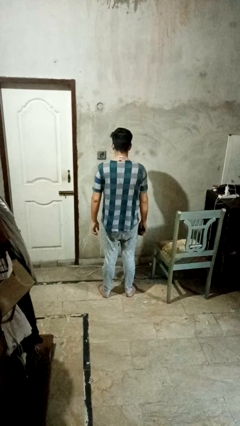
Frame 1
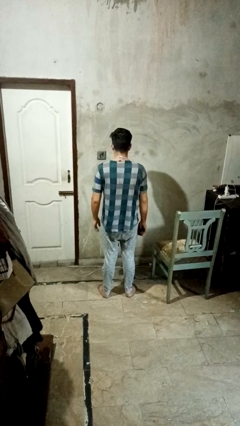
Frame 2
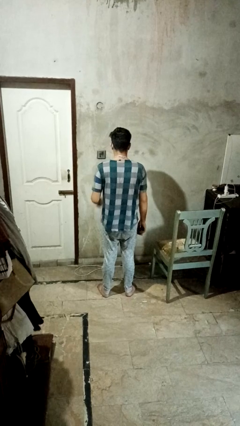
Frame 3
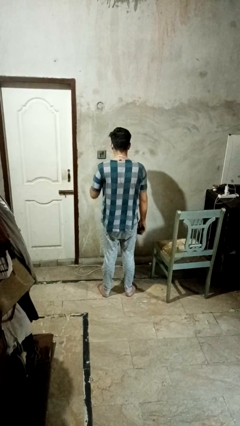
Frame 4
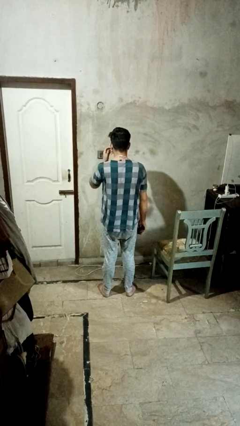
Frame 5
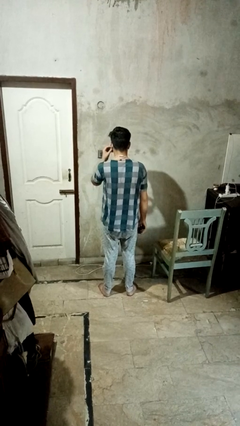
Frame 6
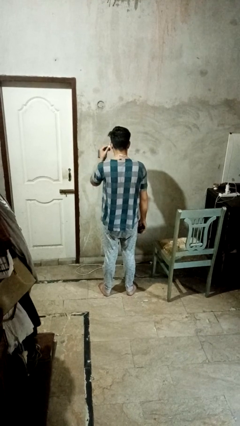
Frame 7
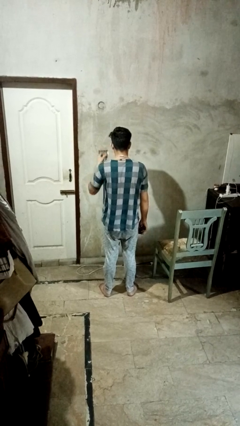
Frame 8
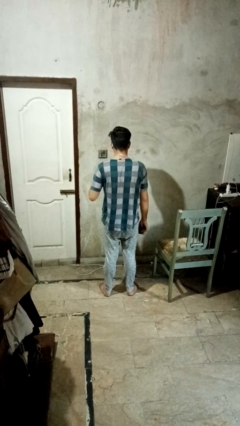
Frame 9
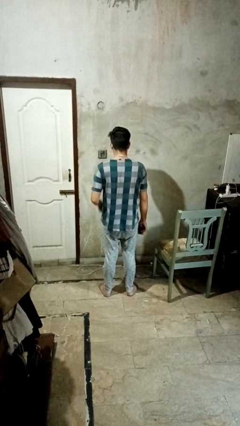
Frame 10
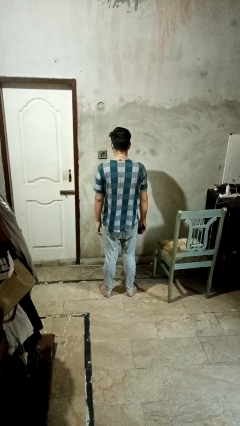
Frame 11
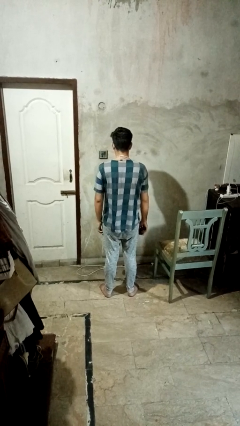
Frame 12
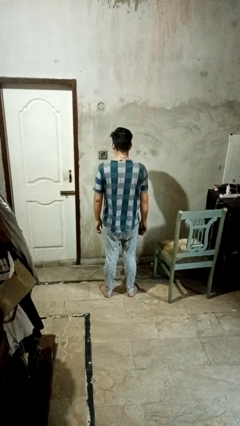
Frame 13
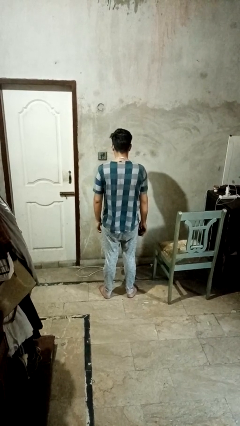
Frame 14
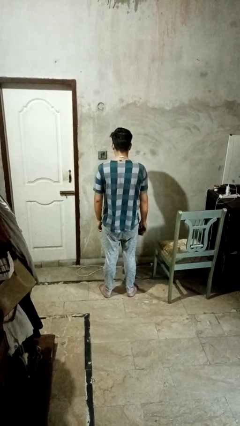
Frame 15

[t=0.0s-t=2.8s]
person takes off headphones

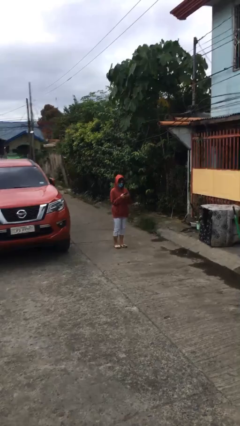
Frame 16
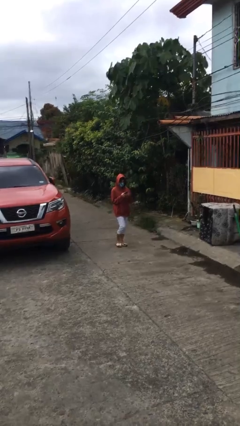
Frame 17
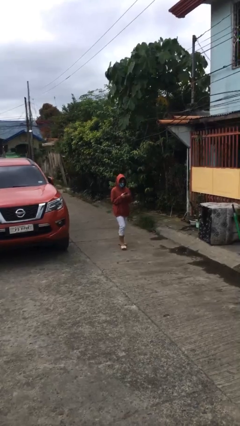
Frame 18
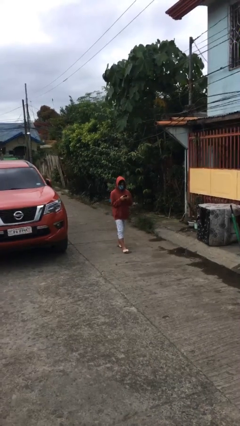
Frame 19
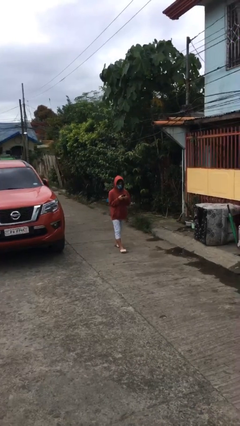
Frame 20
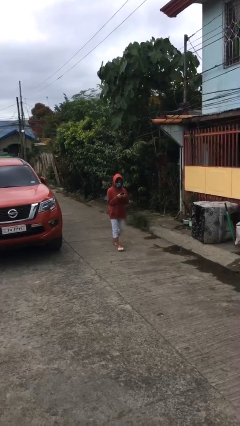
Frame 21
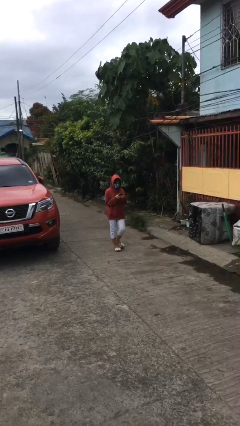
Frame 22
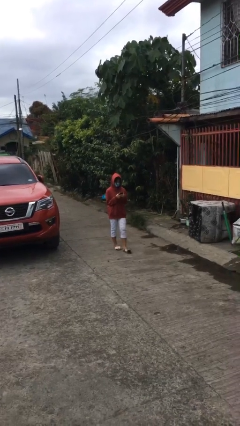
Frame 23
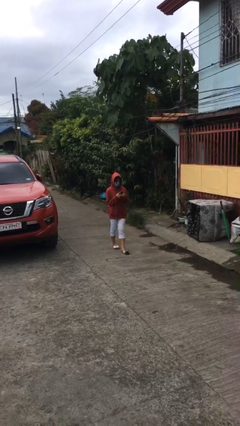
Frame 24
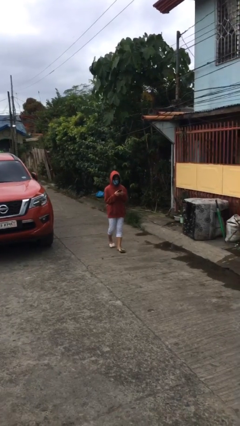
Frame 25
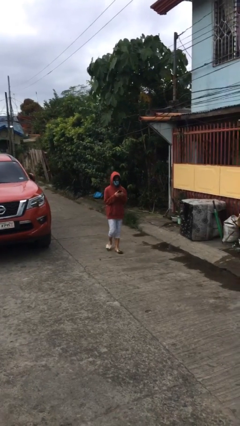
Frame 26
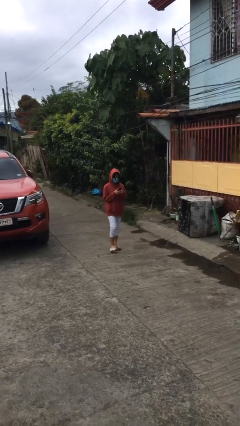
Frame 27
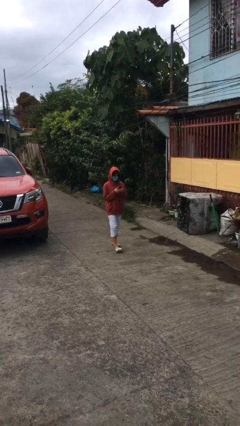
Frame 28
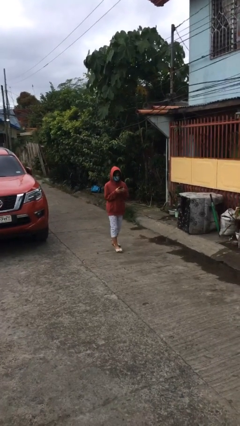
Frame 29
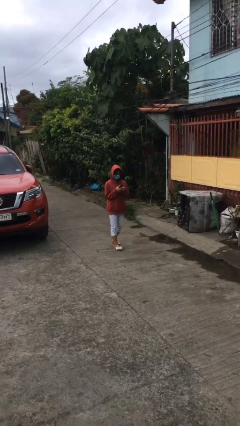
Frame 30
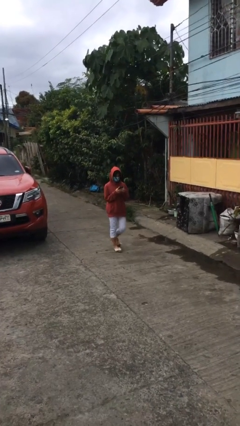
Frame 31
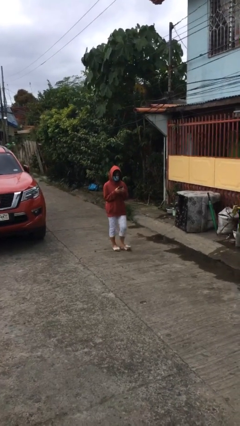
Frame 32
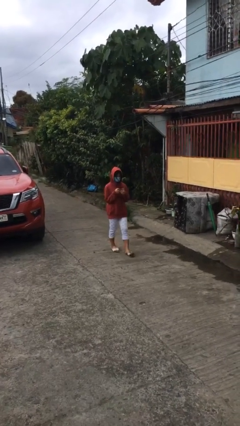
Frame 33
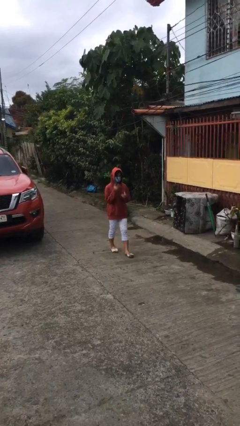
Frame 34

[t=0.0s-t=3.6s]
person texts on phone

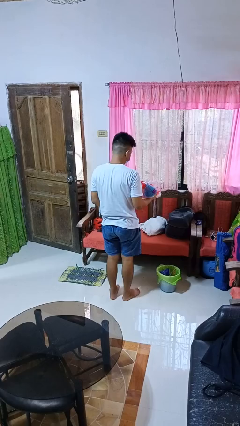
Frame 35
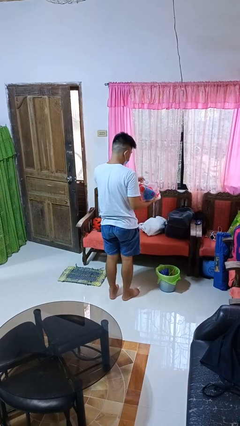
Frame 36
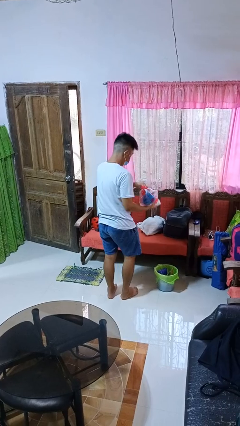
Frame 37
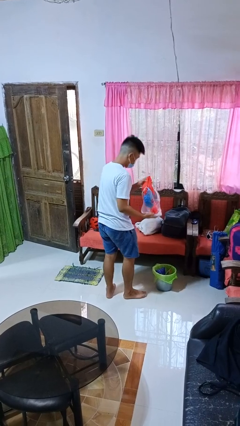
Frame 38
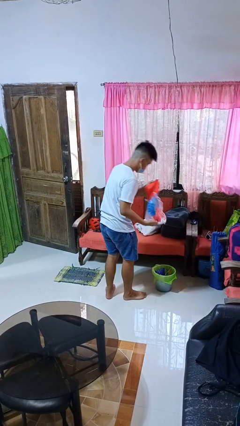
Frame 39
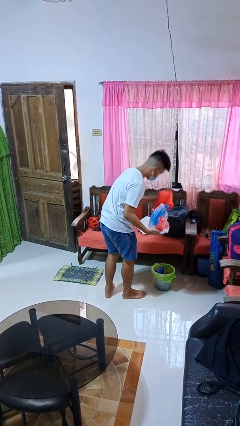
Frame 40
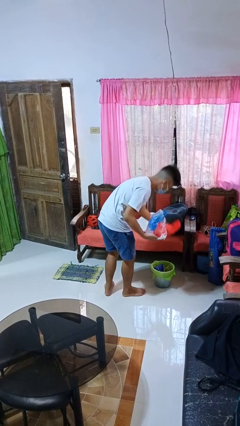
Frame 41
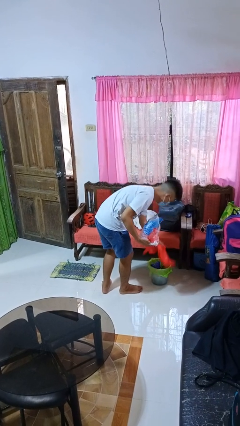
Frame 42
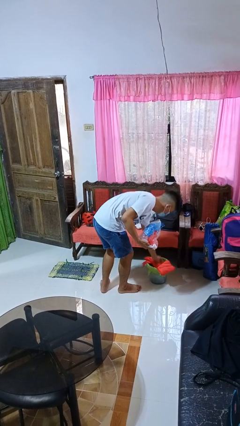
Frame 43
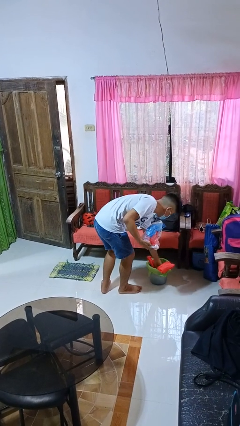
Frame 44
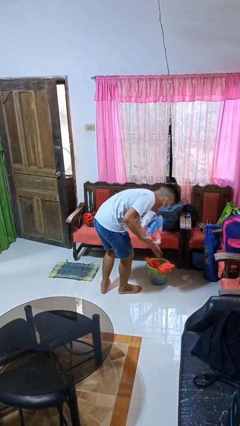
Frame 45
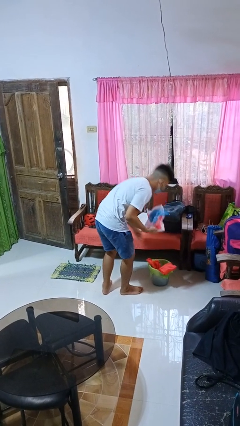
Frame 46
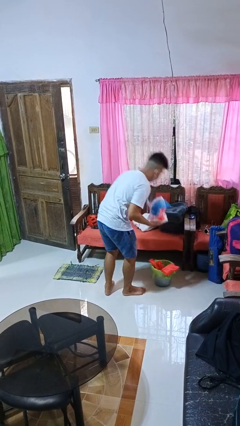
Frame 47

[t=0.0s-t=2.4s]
person discards trash

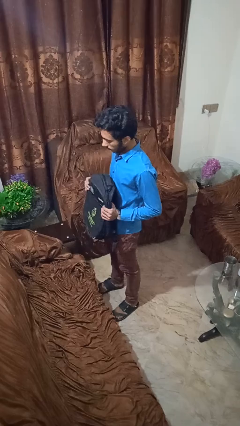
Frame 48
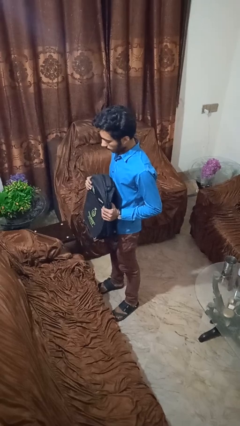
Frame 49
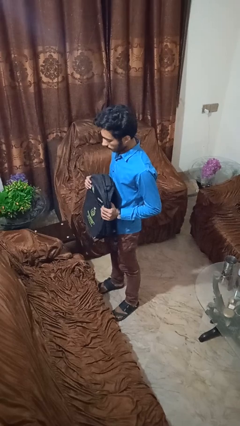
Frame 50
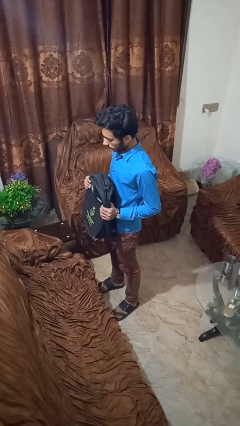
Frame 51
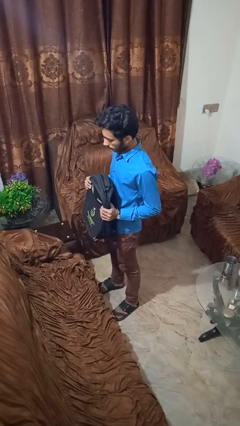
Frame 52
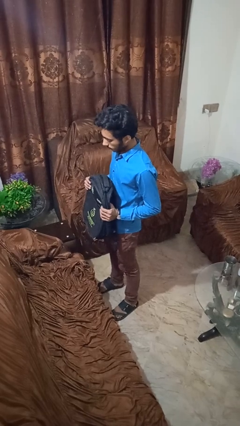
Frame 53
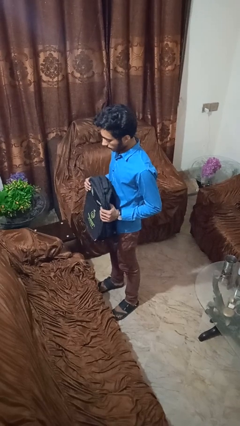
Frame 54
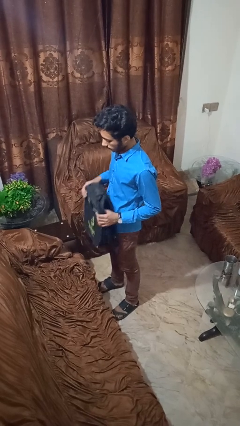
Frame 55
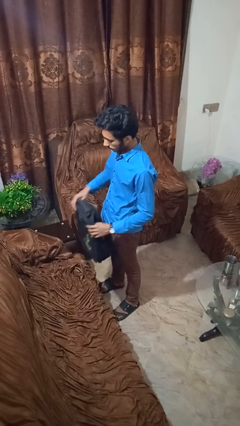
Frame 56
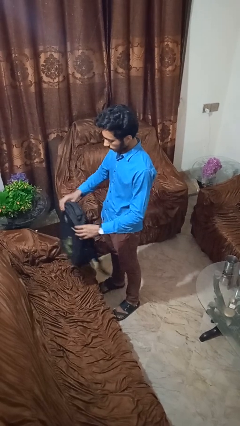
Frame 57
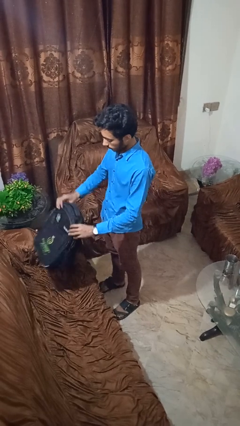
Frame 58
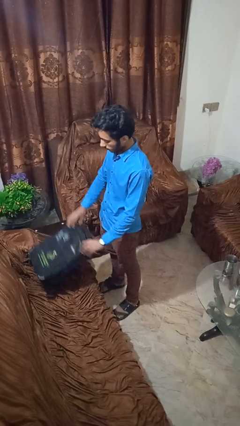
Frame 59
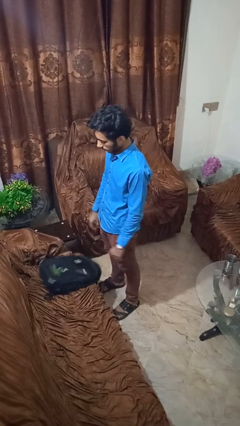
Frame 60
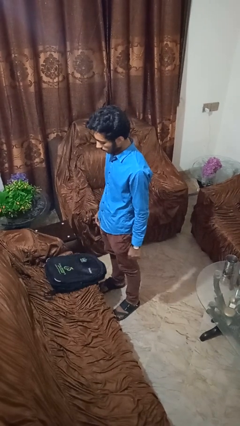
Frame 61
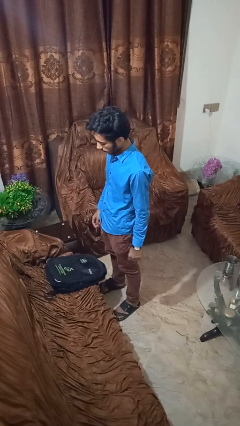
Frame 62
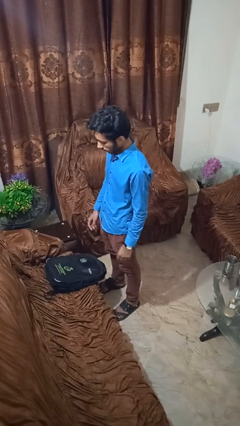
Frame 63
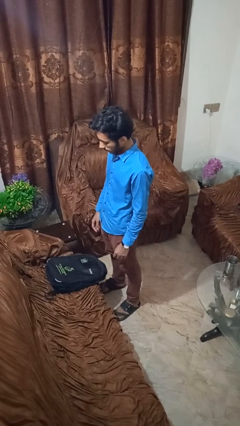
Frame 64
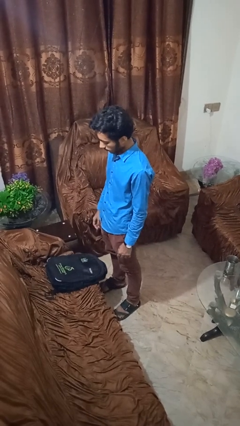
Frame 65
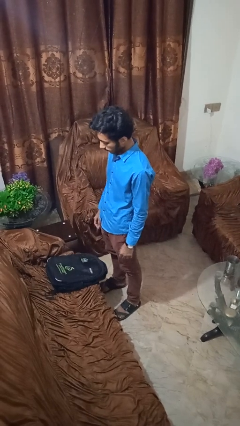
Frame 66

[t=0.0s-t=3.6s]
person puts down object on couch

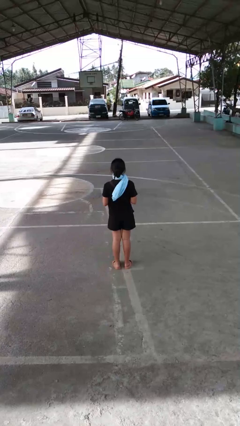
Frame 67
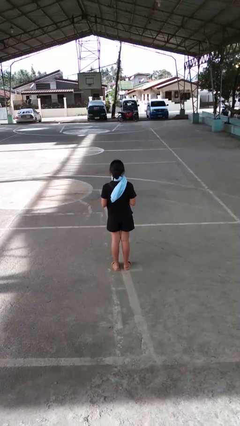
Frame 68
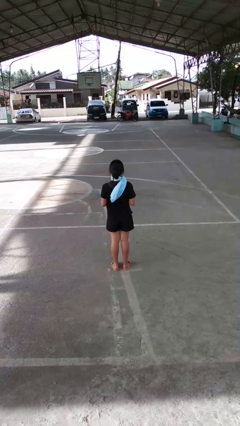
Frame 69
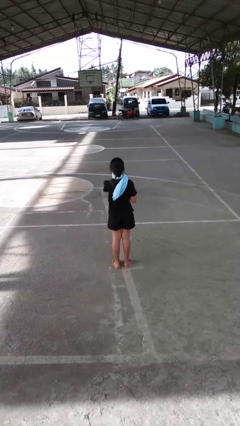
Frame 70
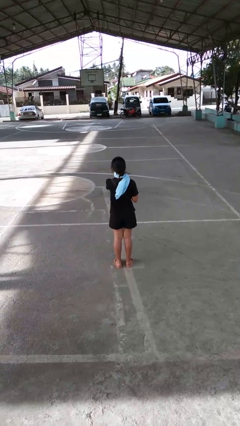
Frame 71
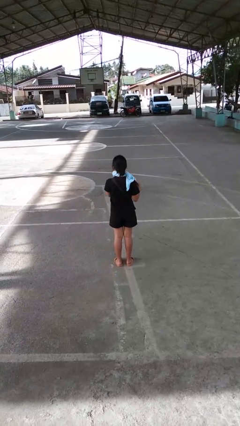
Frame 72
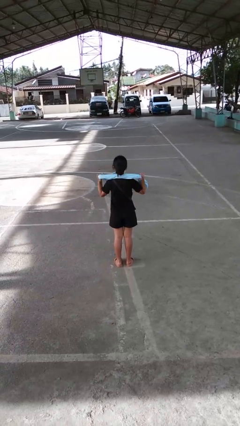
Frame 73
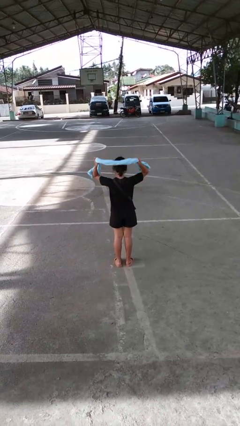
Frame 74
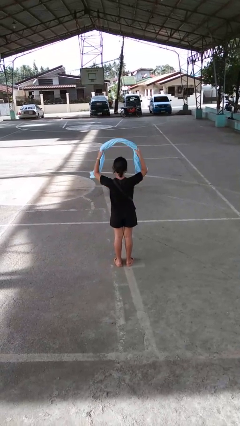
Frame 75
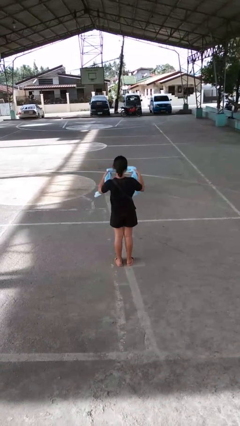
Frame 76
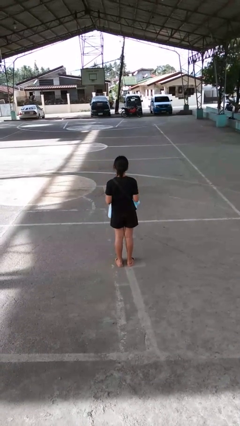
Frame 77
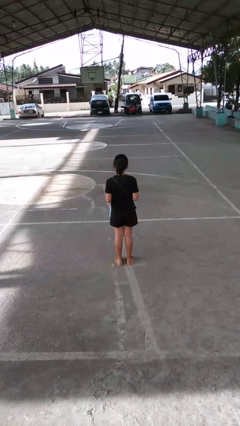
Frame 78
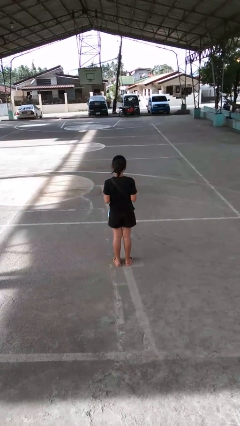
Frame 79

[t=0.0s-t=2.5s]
person takes off scarf

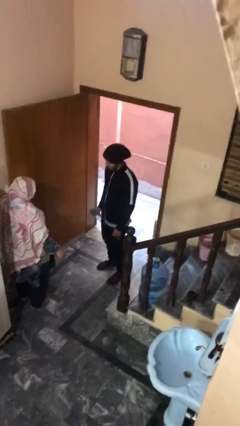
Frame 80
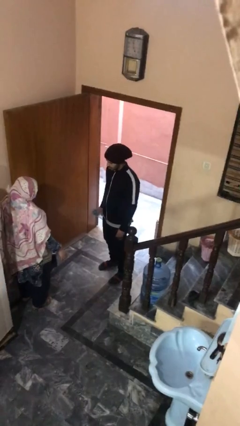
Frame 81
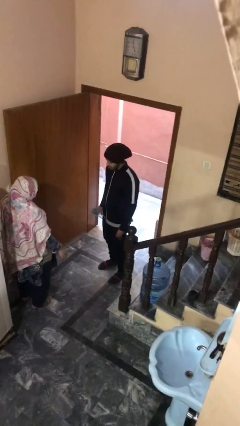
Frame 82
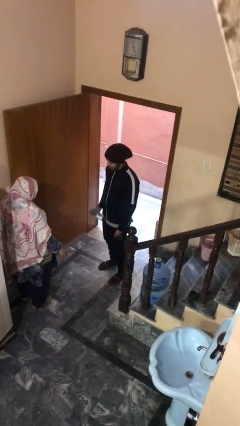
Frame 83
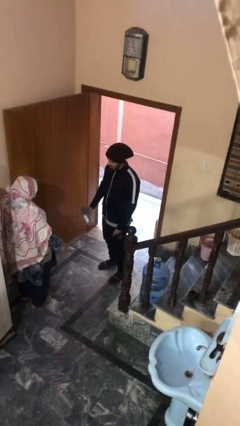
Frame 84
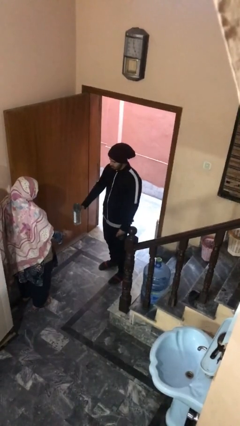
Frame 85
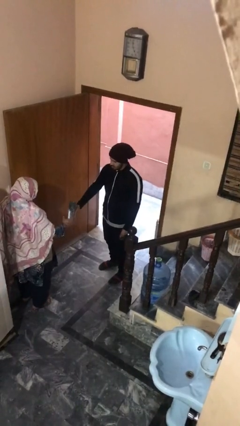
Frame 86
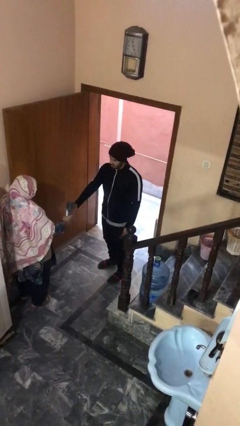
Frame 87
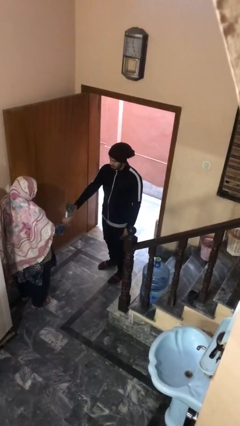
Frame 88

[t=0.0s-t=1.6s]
person transfers object to person

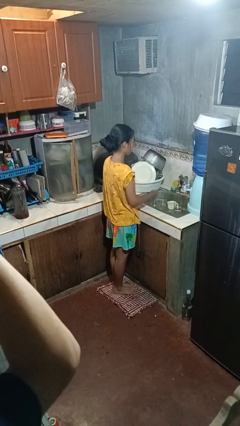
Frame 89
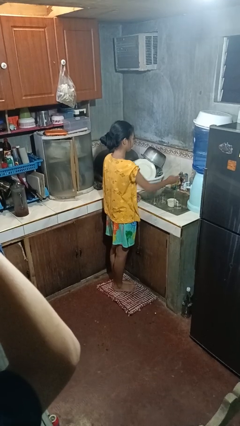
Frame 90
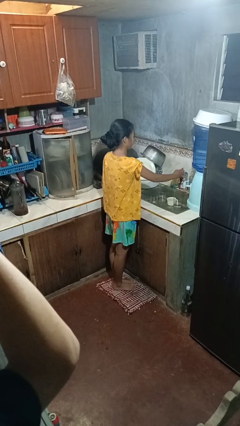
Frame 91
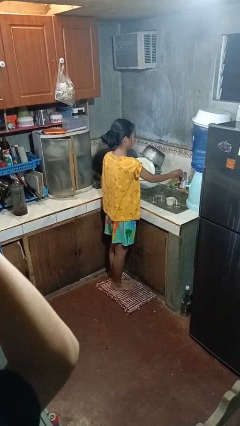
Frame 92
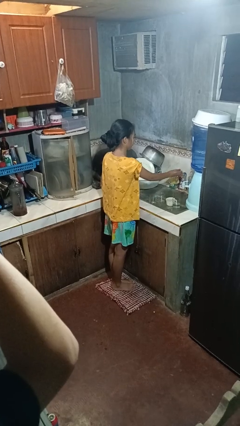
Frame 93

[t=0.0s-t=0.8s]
person turns off faucet

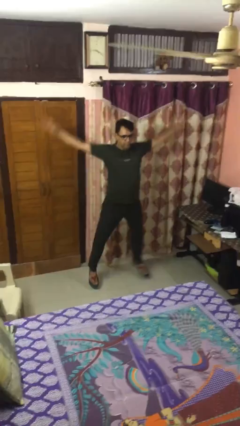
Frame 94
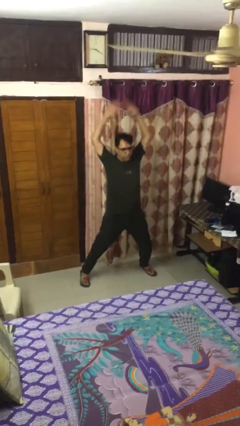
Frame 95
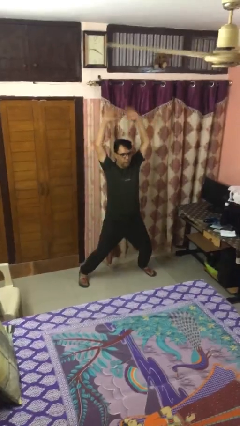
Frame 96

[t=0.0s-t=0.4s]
person exercises with jumping jacks
